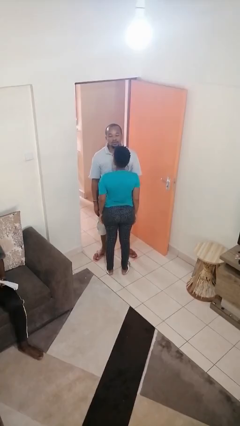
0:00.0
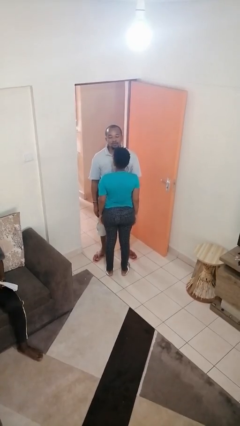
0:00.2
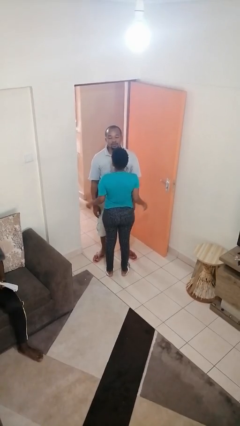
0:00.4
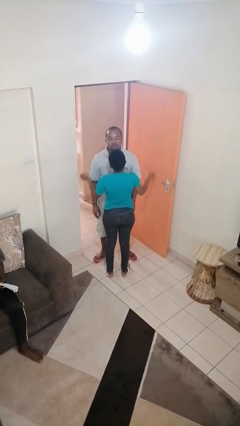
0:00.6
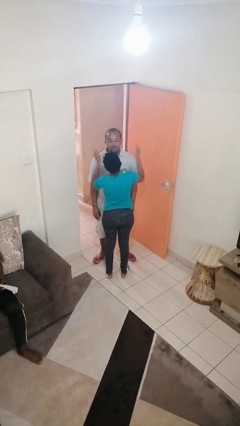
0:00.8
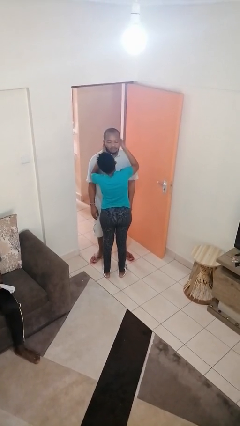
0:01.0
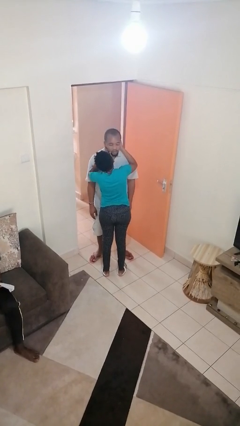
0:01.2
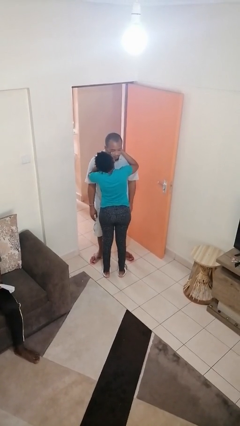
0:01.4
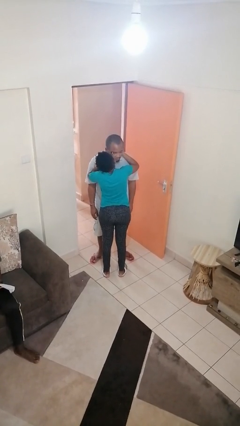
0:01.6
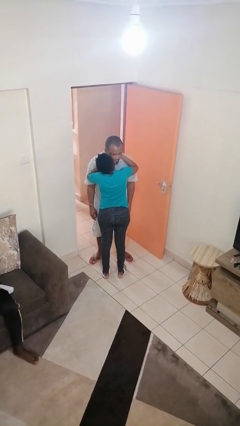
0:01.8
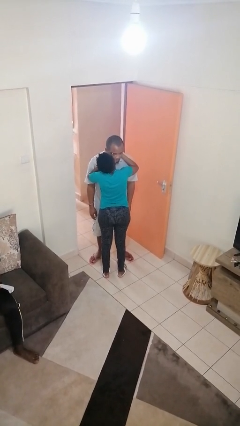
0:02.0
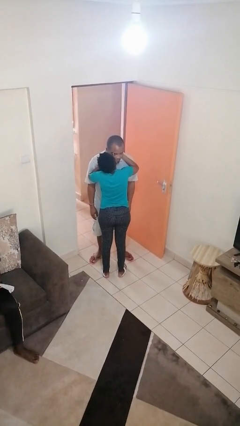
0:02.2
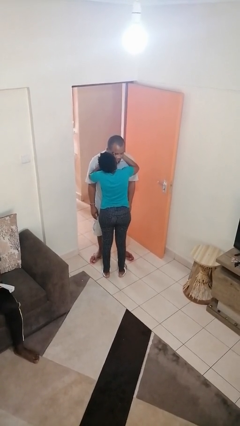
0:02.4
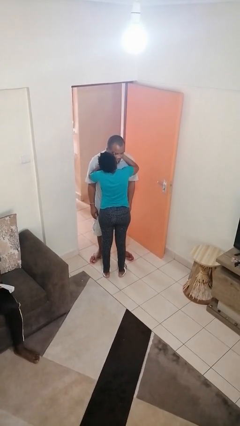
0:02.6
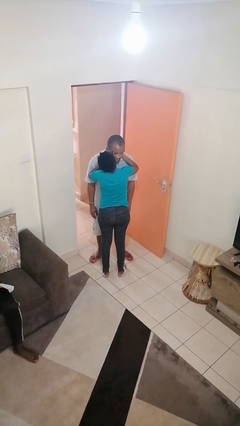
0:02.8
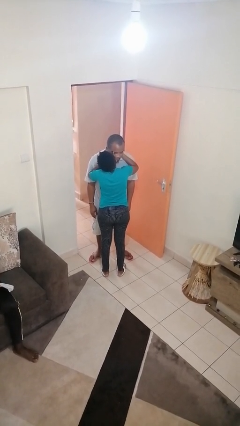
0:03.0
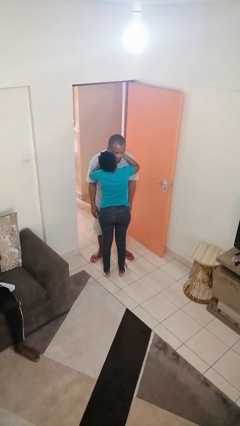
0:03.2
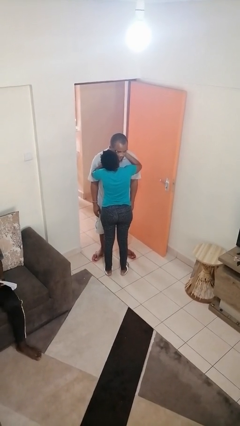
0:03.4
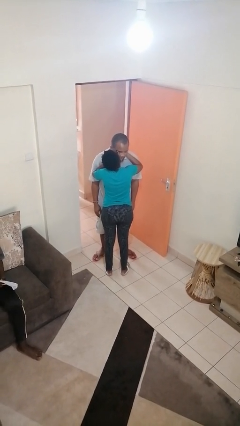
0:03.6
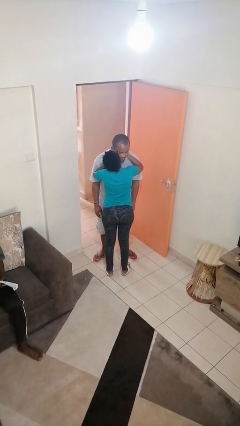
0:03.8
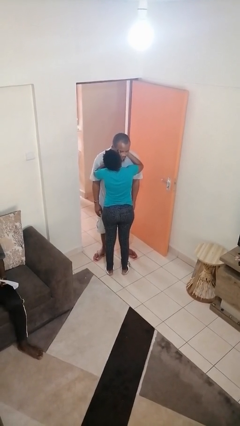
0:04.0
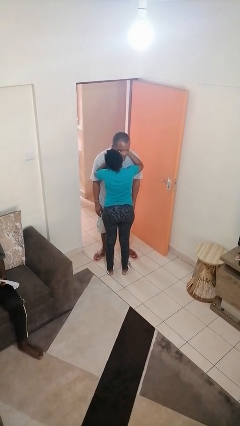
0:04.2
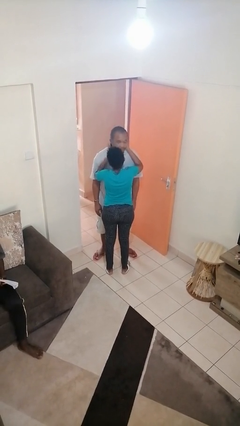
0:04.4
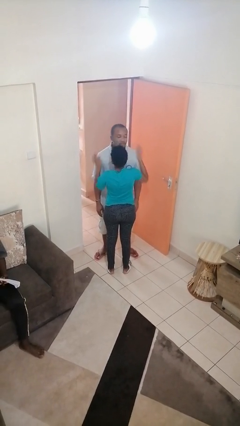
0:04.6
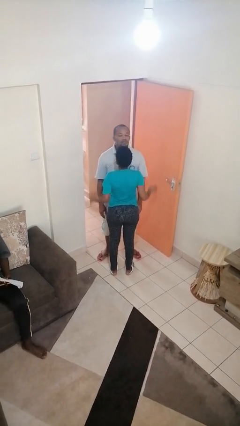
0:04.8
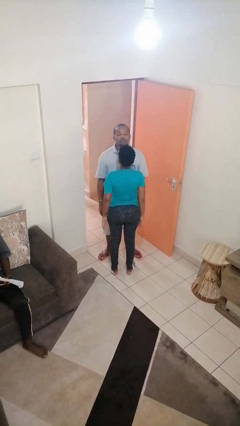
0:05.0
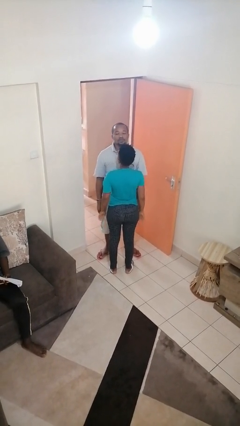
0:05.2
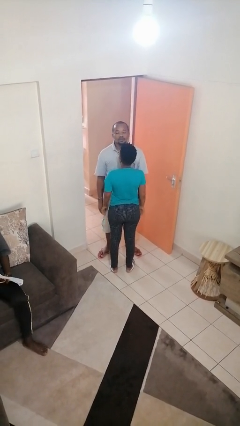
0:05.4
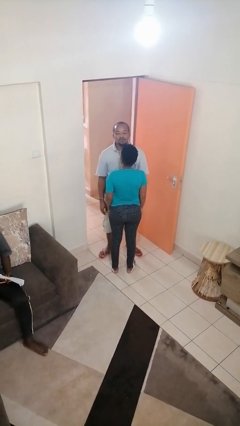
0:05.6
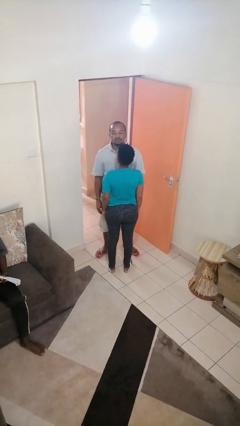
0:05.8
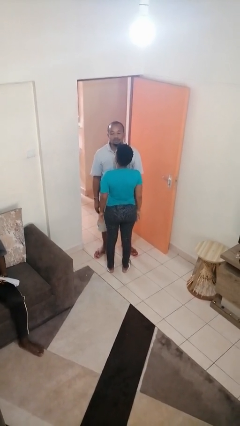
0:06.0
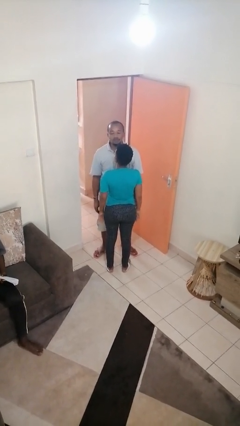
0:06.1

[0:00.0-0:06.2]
person kisses cheek of person

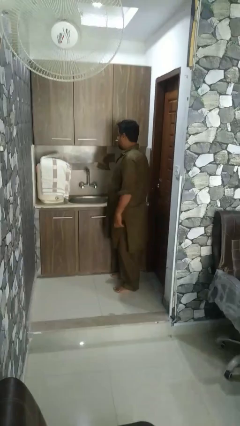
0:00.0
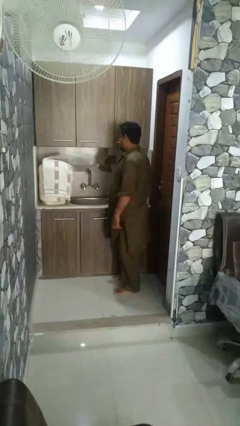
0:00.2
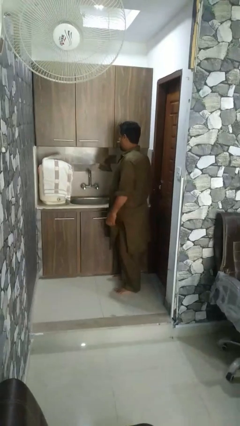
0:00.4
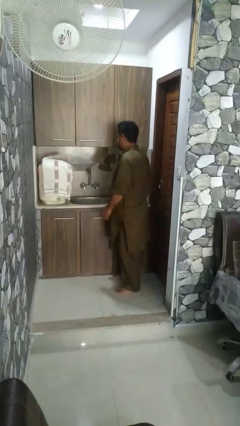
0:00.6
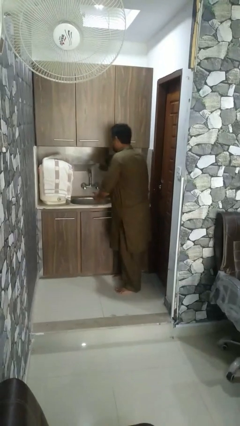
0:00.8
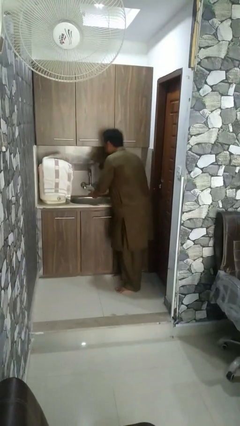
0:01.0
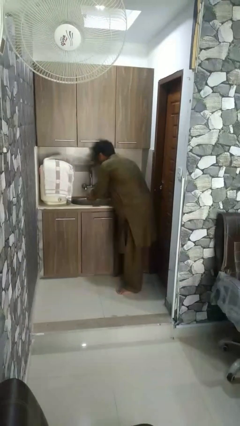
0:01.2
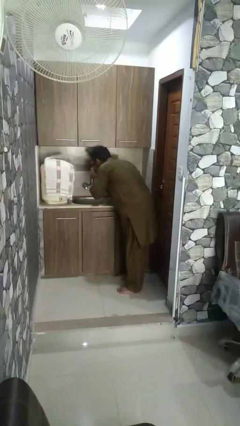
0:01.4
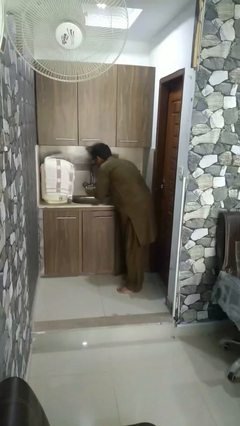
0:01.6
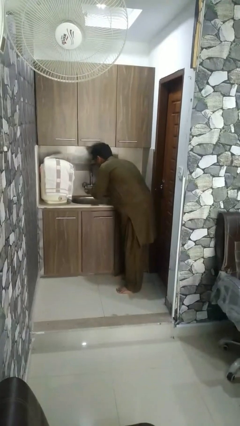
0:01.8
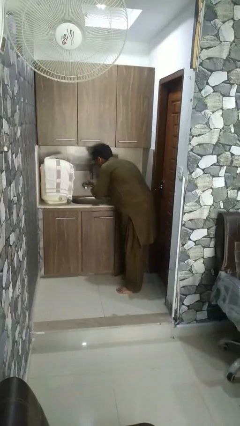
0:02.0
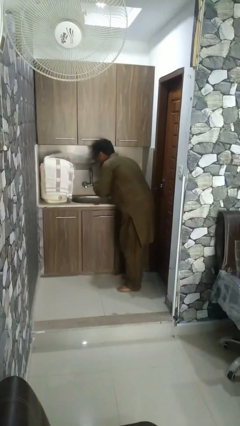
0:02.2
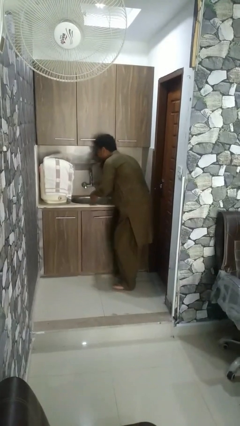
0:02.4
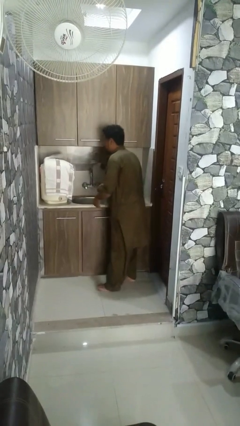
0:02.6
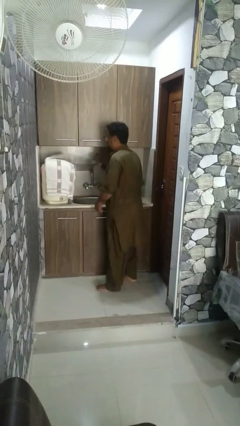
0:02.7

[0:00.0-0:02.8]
person washes face

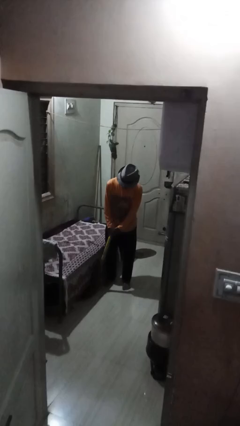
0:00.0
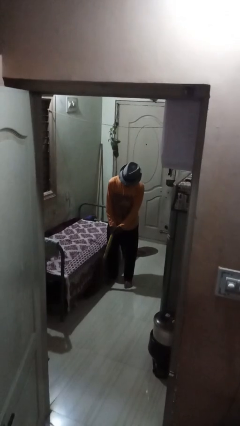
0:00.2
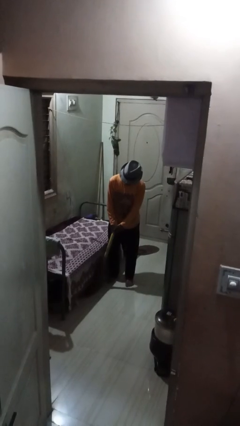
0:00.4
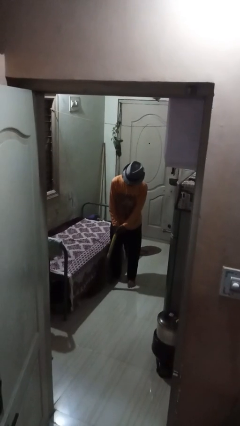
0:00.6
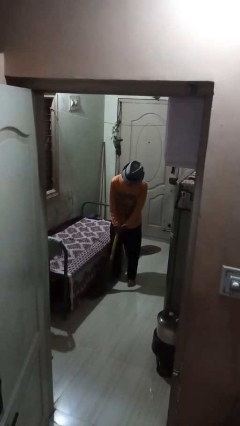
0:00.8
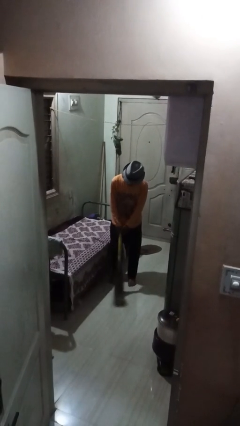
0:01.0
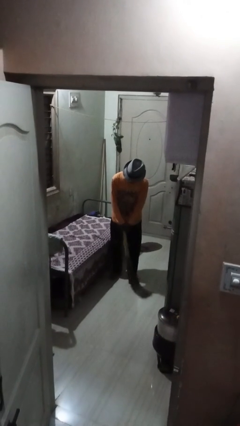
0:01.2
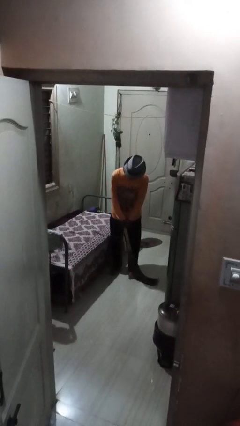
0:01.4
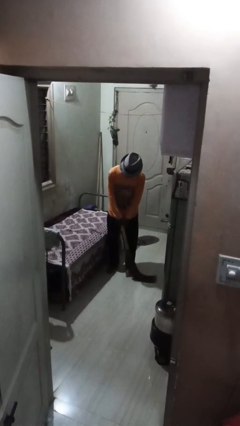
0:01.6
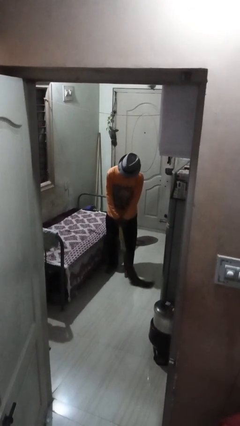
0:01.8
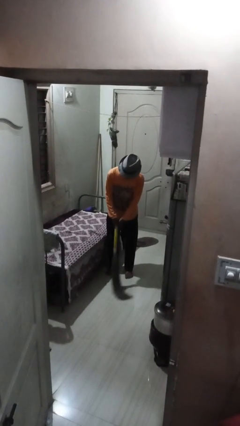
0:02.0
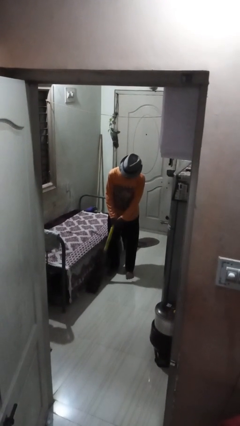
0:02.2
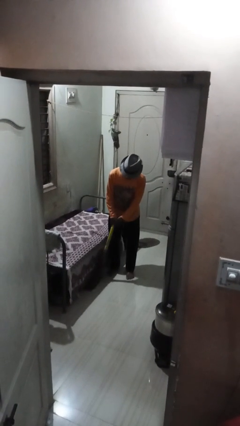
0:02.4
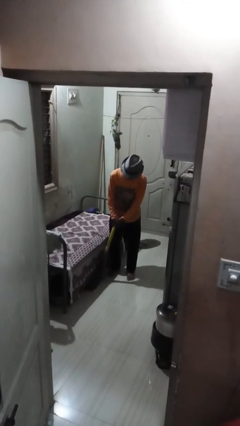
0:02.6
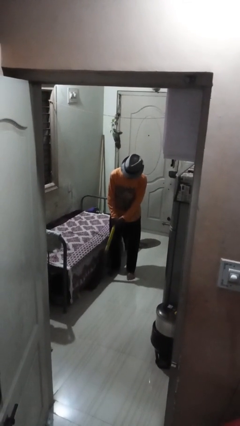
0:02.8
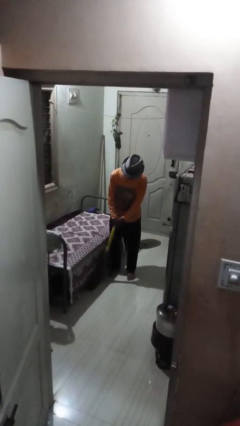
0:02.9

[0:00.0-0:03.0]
person sweeps floor

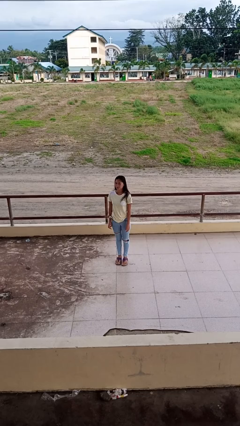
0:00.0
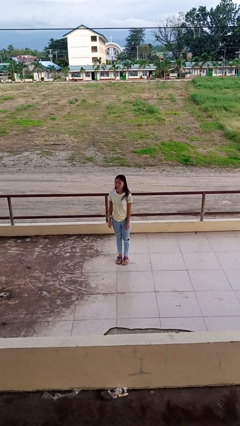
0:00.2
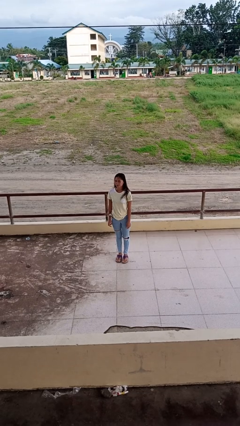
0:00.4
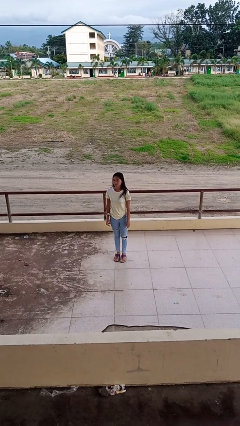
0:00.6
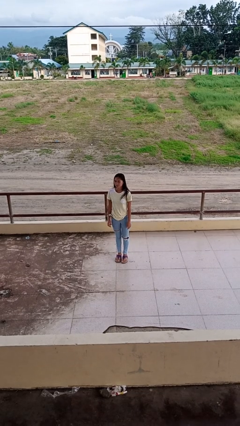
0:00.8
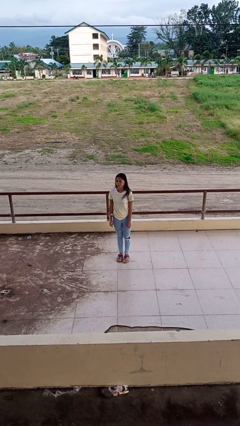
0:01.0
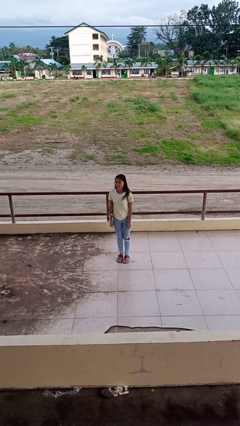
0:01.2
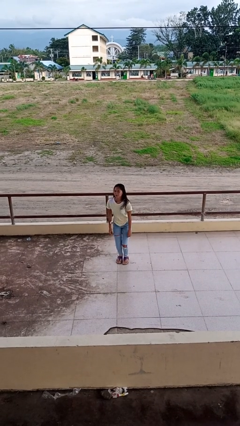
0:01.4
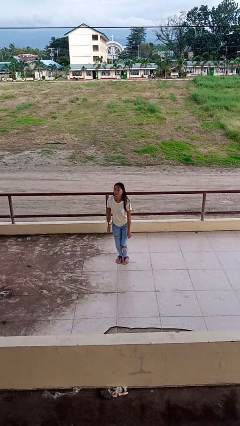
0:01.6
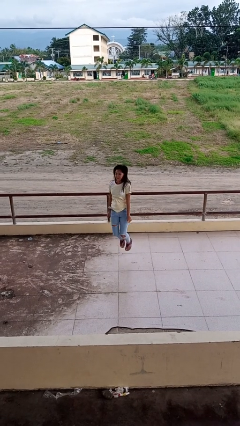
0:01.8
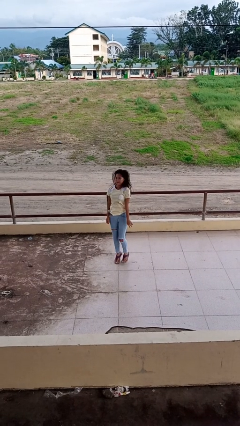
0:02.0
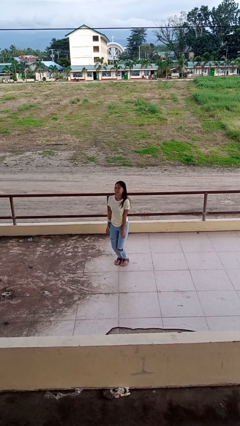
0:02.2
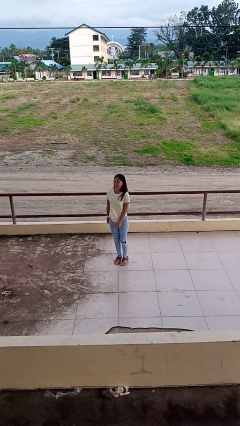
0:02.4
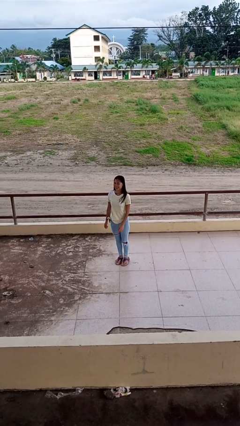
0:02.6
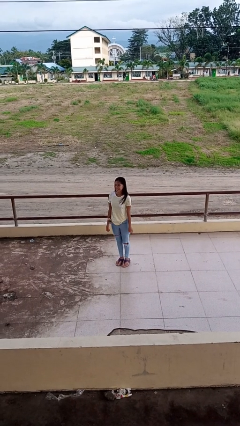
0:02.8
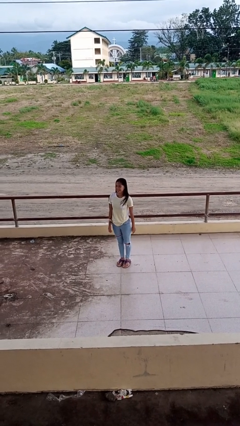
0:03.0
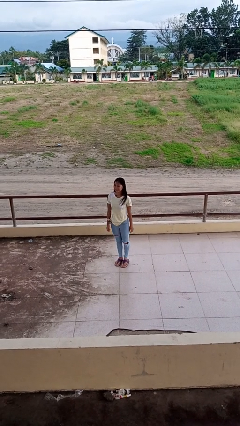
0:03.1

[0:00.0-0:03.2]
person jumps

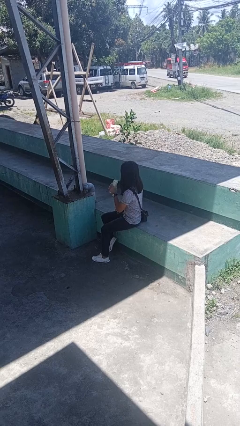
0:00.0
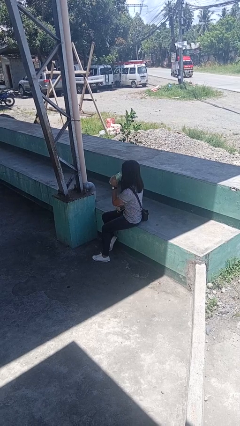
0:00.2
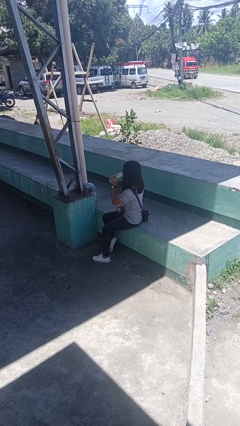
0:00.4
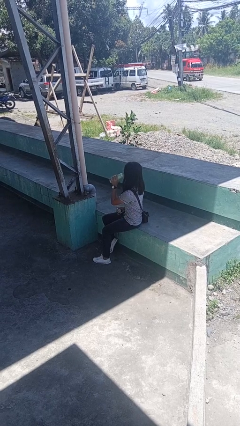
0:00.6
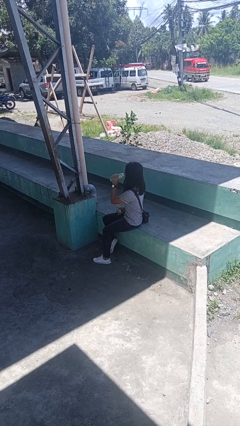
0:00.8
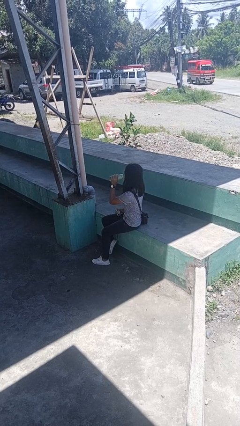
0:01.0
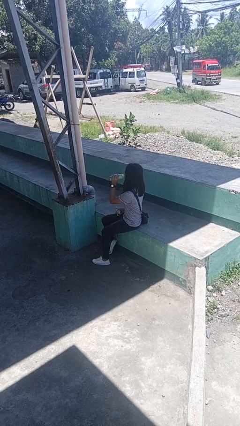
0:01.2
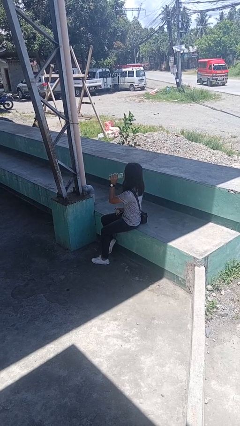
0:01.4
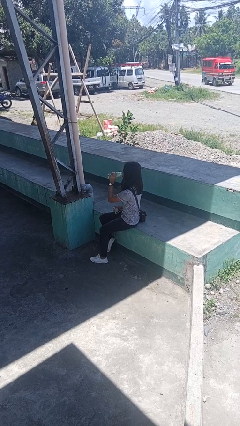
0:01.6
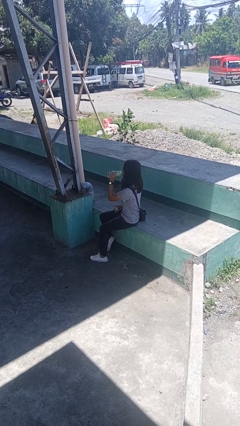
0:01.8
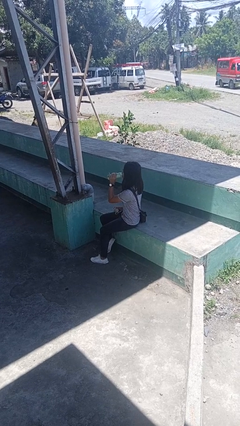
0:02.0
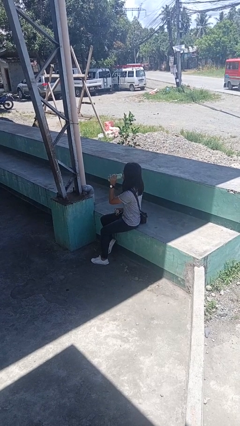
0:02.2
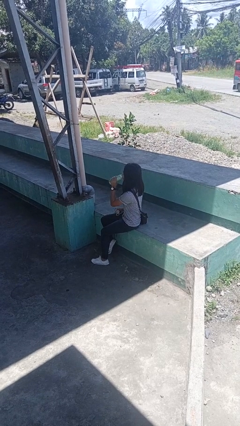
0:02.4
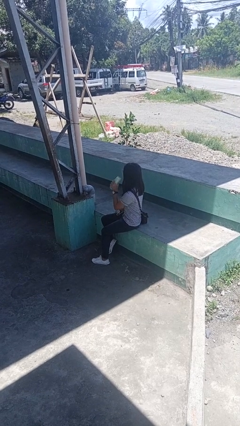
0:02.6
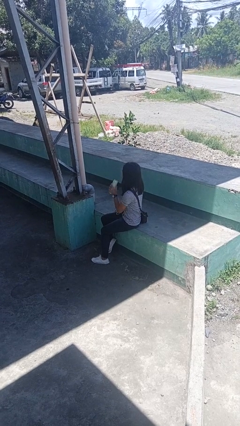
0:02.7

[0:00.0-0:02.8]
person drinks from bottle
